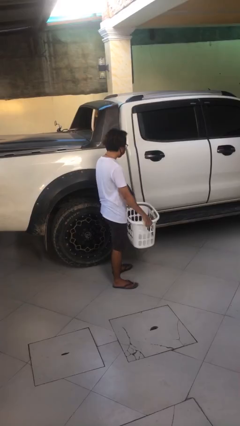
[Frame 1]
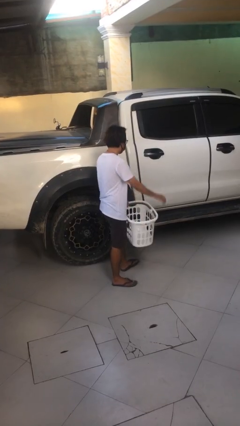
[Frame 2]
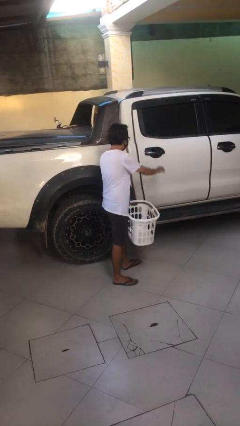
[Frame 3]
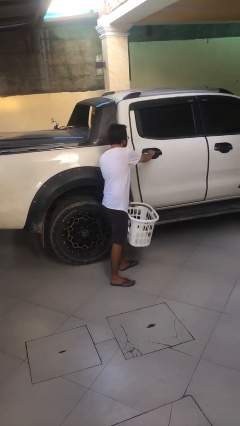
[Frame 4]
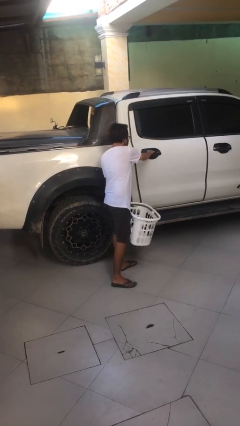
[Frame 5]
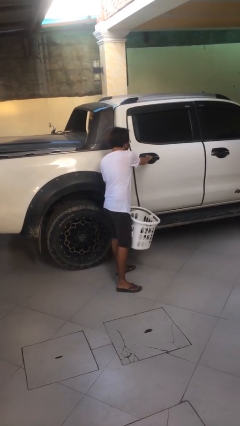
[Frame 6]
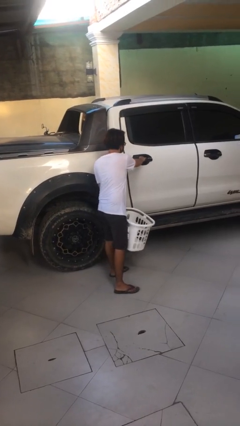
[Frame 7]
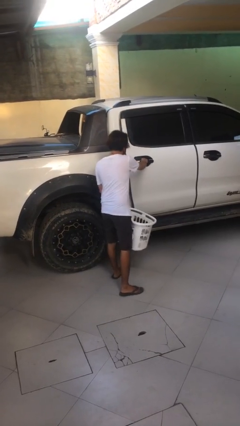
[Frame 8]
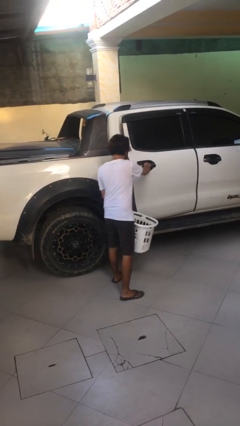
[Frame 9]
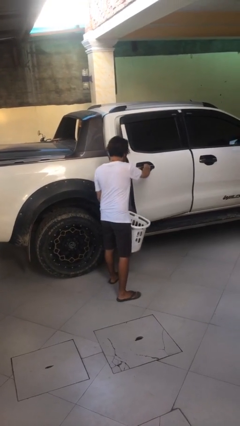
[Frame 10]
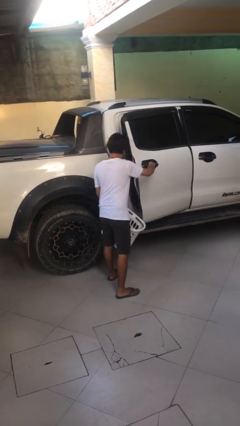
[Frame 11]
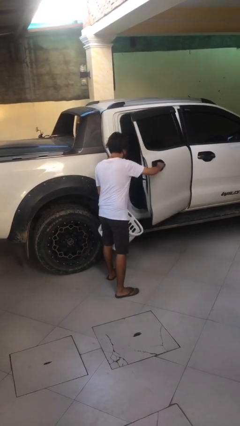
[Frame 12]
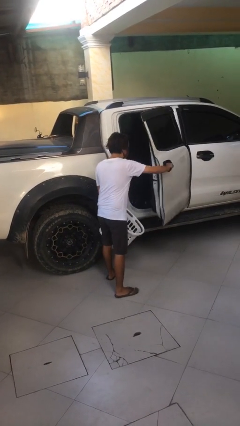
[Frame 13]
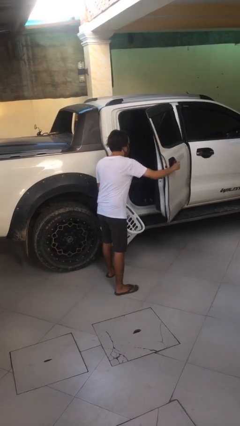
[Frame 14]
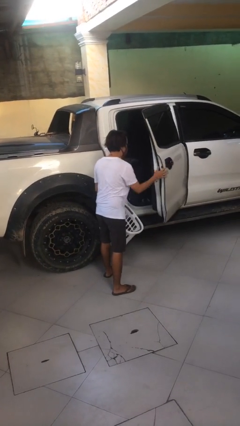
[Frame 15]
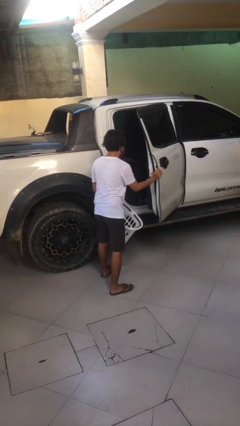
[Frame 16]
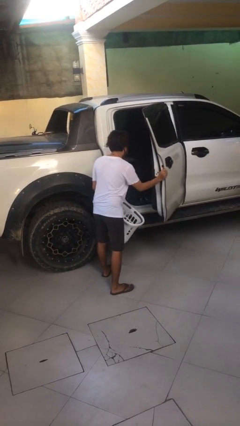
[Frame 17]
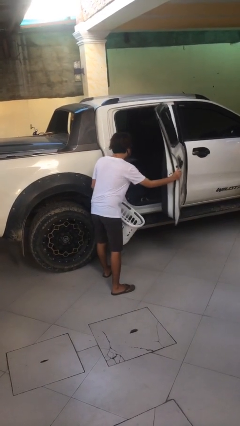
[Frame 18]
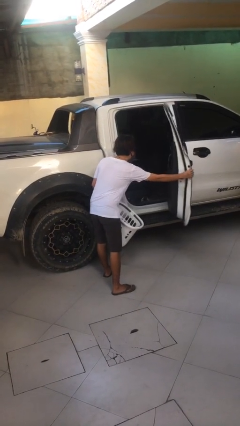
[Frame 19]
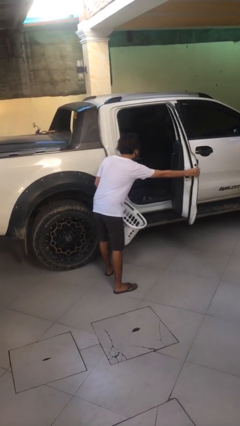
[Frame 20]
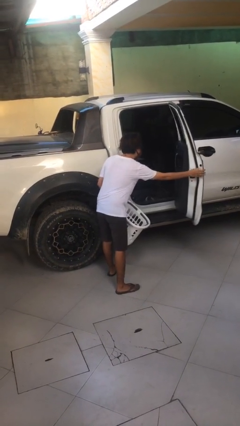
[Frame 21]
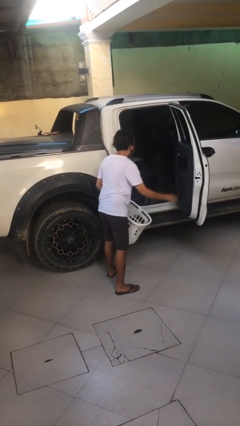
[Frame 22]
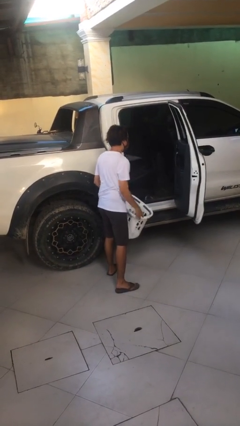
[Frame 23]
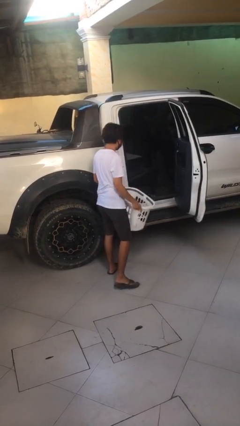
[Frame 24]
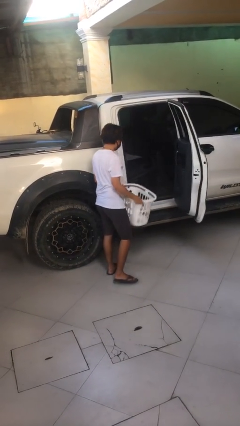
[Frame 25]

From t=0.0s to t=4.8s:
person opens car door

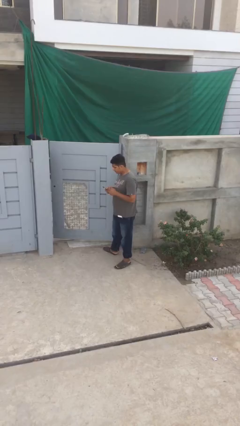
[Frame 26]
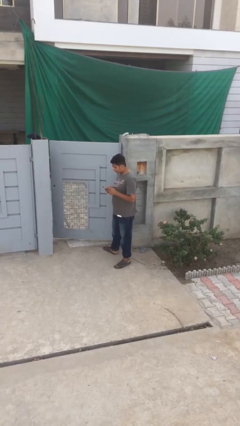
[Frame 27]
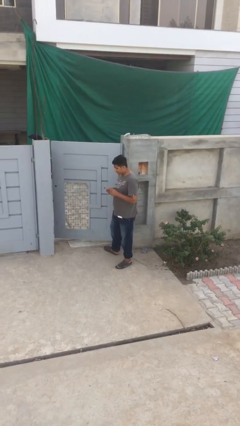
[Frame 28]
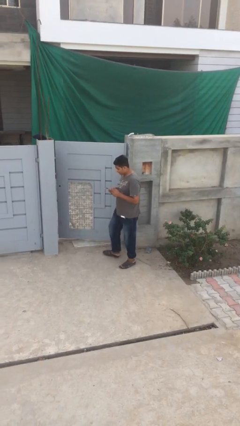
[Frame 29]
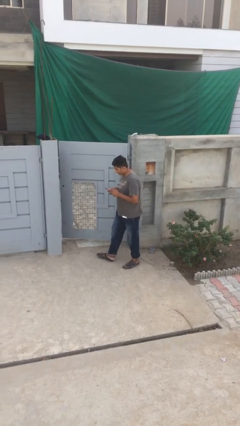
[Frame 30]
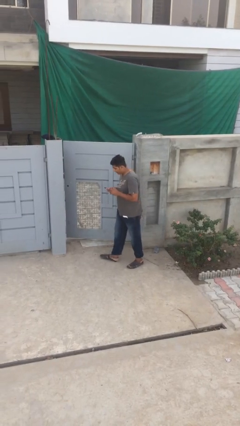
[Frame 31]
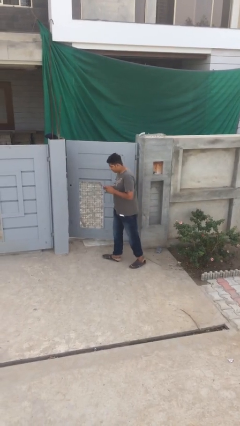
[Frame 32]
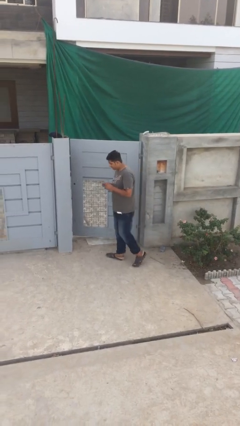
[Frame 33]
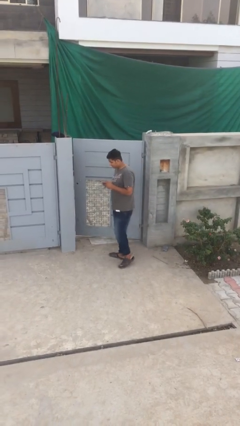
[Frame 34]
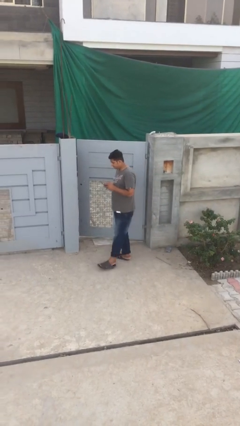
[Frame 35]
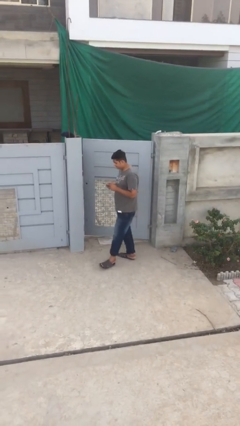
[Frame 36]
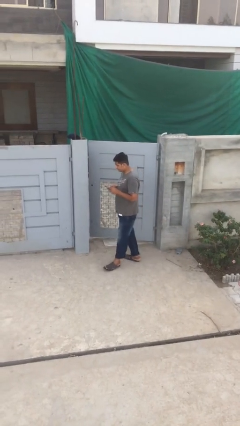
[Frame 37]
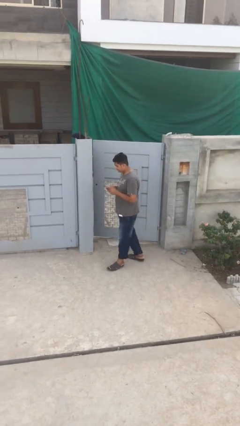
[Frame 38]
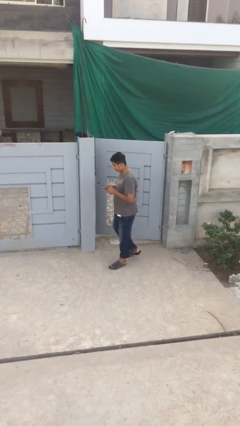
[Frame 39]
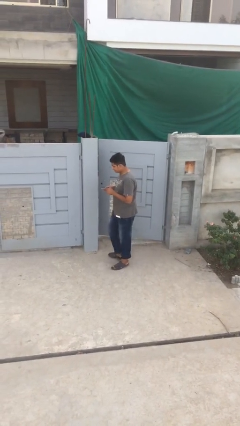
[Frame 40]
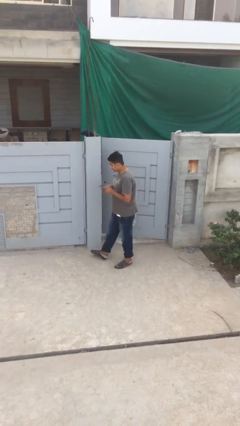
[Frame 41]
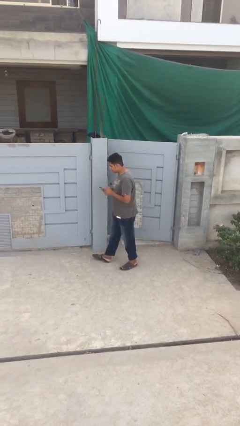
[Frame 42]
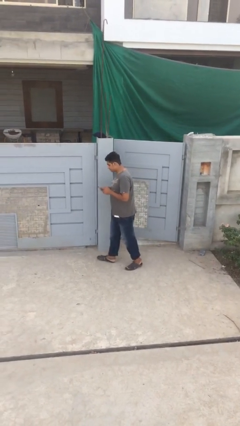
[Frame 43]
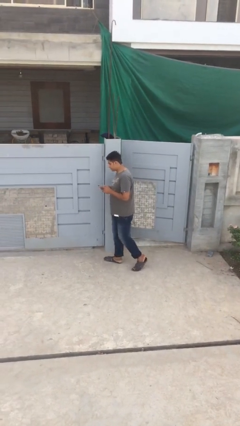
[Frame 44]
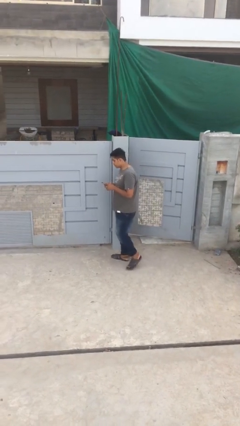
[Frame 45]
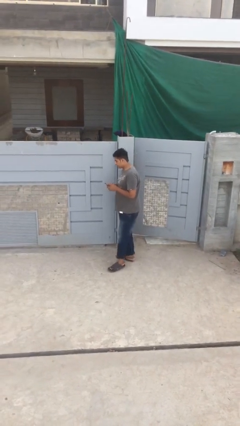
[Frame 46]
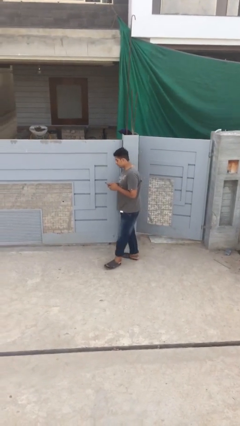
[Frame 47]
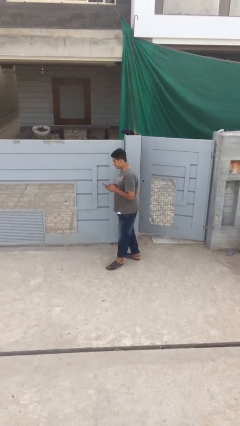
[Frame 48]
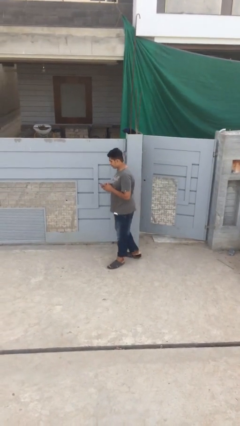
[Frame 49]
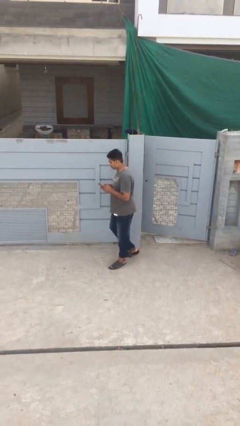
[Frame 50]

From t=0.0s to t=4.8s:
person texts on phone

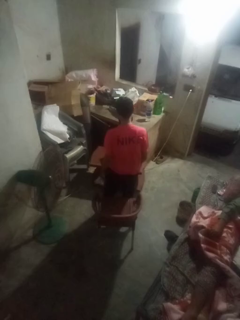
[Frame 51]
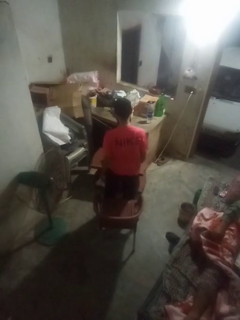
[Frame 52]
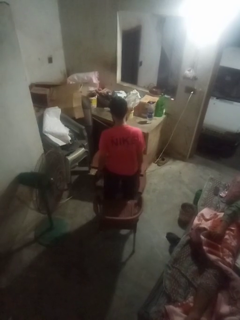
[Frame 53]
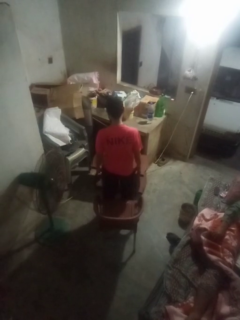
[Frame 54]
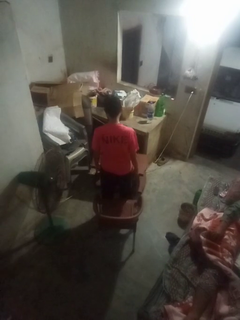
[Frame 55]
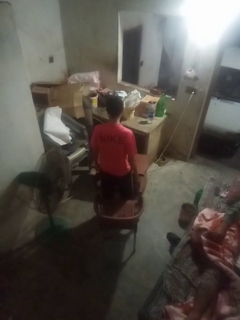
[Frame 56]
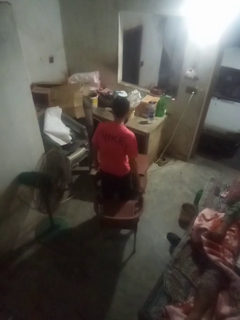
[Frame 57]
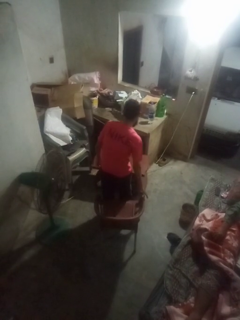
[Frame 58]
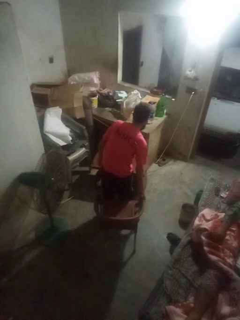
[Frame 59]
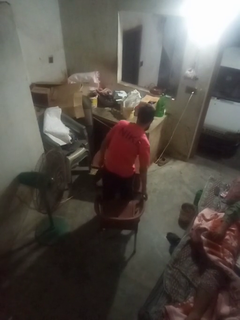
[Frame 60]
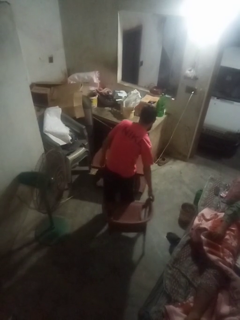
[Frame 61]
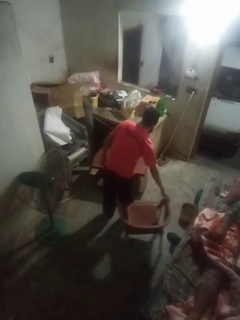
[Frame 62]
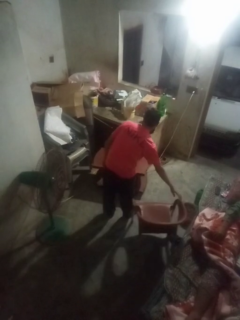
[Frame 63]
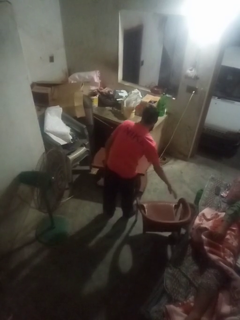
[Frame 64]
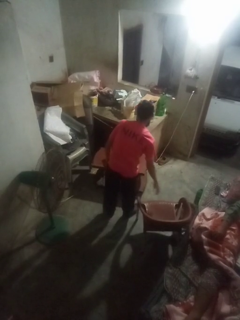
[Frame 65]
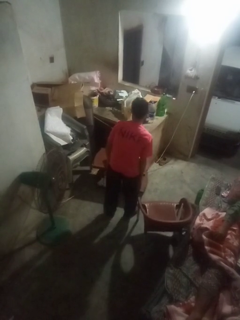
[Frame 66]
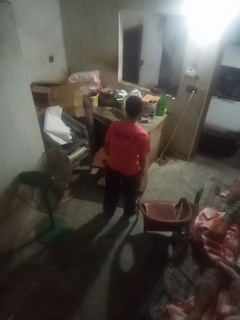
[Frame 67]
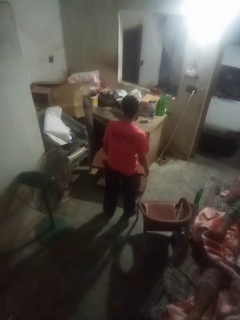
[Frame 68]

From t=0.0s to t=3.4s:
person pushes in chair

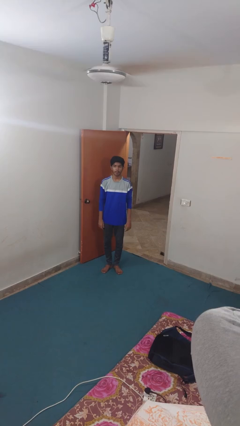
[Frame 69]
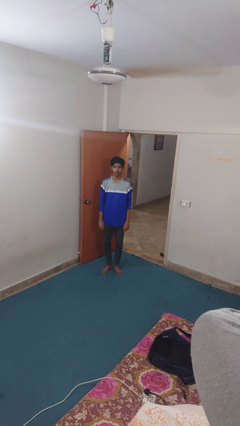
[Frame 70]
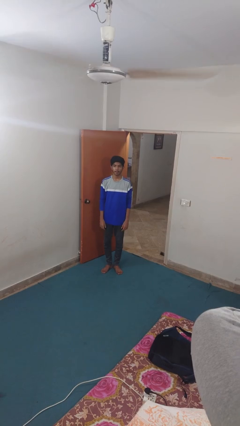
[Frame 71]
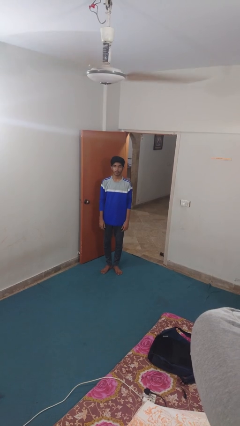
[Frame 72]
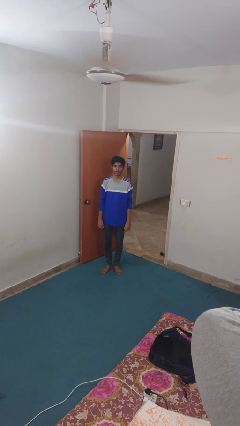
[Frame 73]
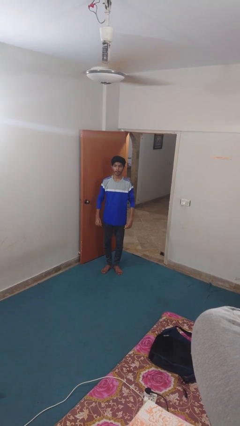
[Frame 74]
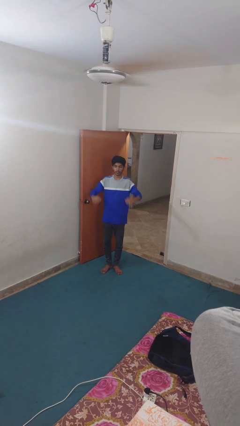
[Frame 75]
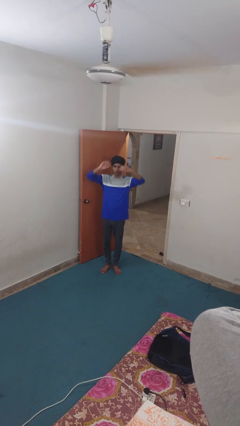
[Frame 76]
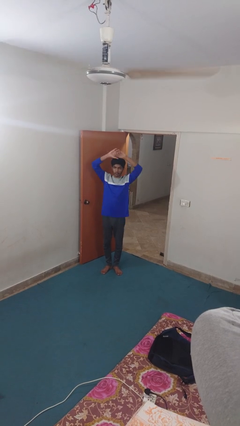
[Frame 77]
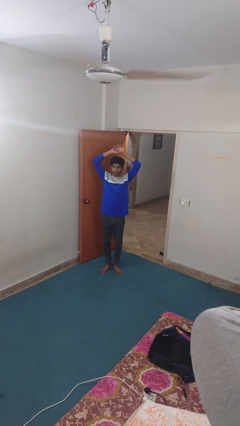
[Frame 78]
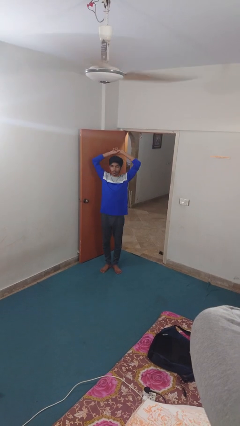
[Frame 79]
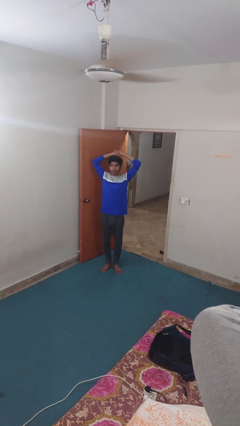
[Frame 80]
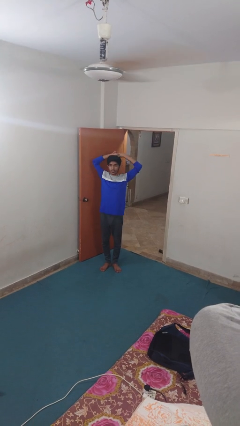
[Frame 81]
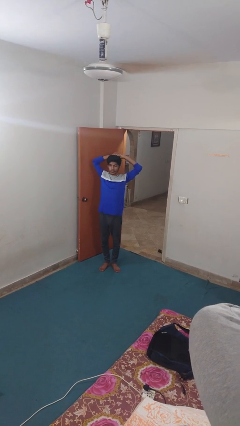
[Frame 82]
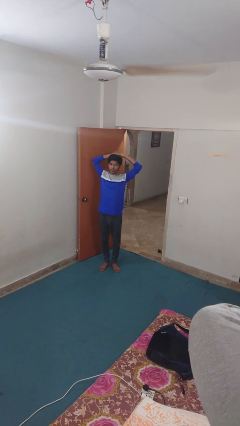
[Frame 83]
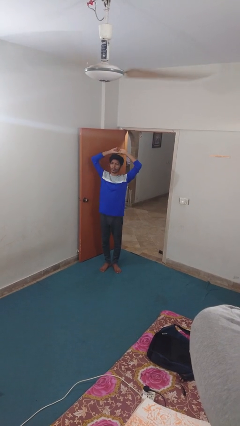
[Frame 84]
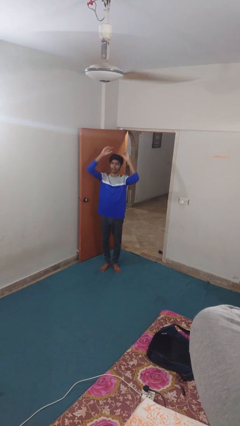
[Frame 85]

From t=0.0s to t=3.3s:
person stretches arms over head

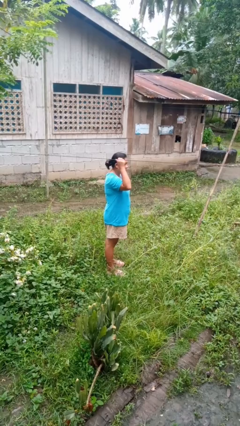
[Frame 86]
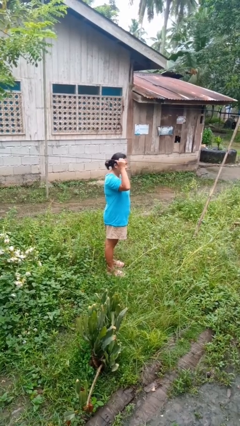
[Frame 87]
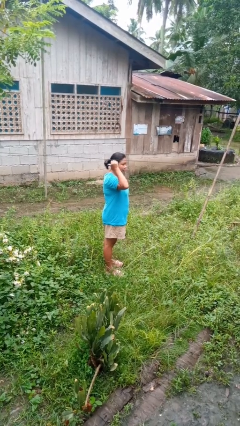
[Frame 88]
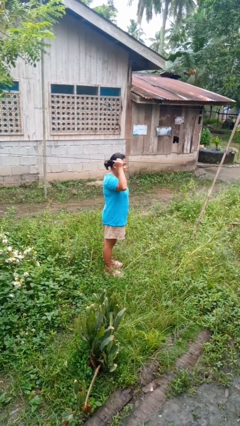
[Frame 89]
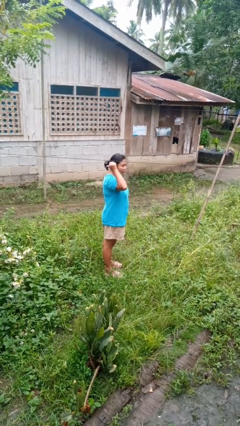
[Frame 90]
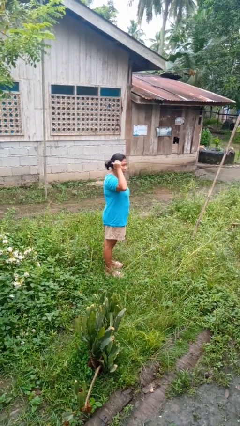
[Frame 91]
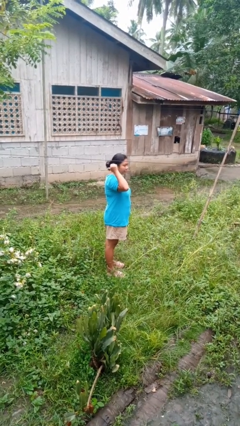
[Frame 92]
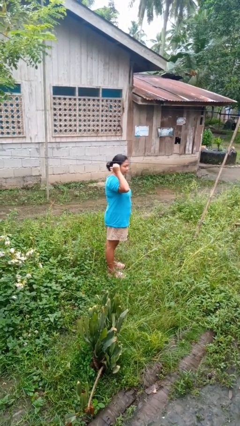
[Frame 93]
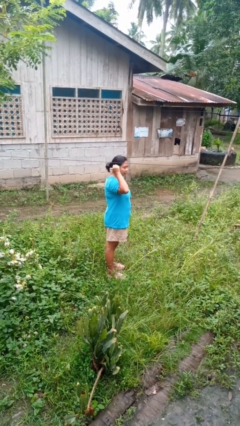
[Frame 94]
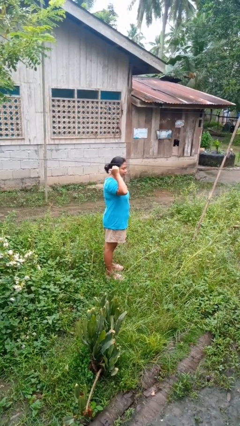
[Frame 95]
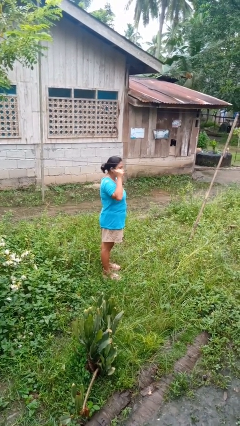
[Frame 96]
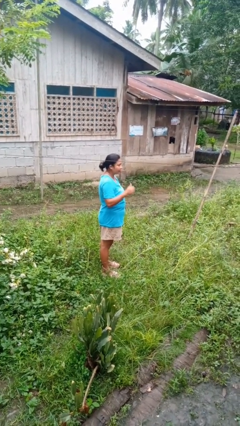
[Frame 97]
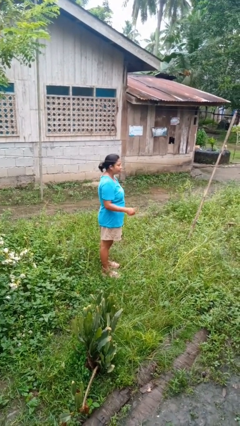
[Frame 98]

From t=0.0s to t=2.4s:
person gestures behind me
